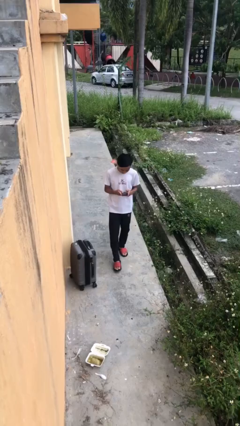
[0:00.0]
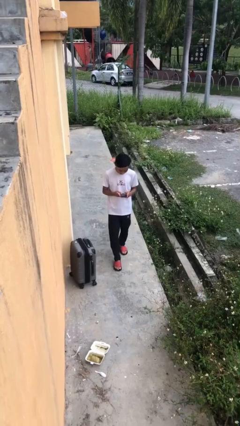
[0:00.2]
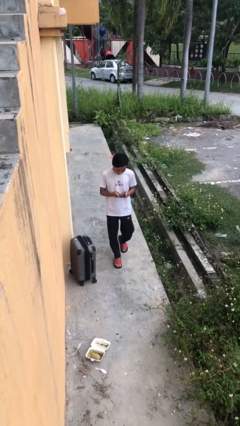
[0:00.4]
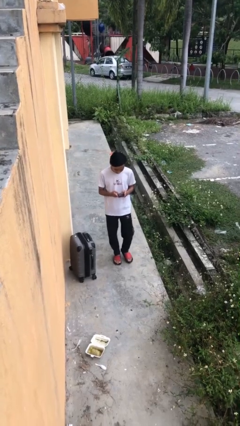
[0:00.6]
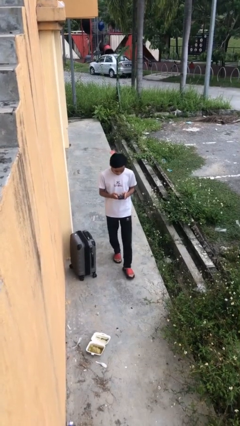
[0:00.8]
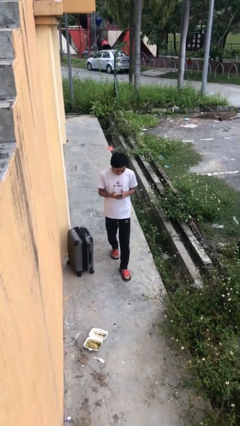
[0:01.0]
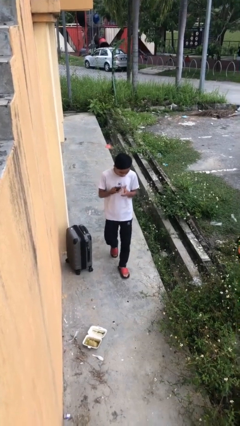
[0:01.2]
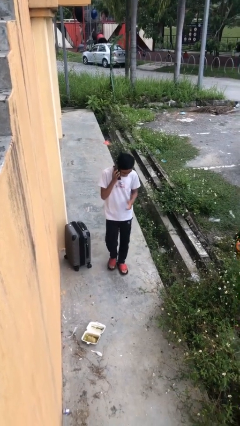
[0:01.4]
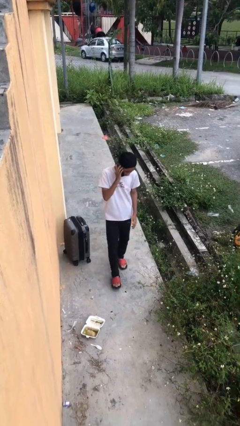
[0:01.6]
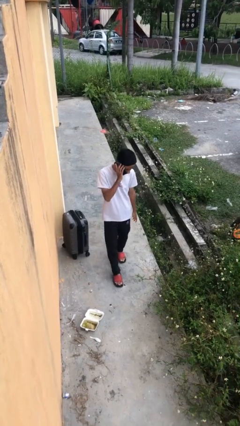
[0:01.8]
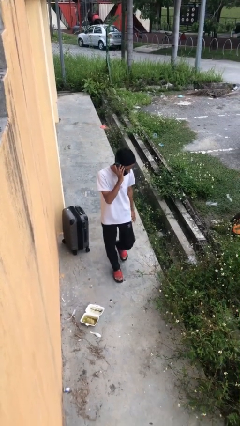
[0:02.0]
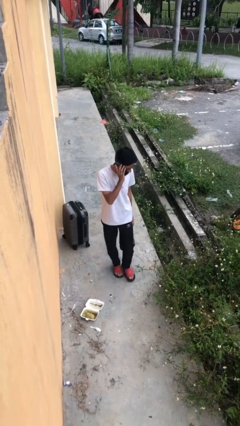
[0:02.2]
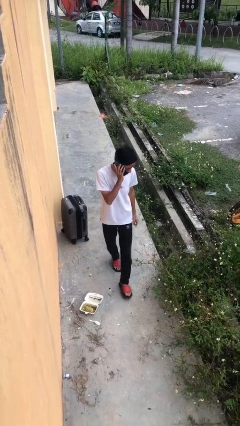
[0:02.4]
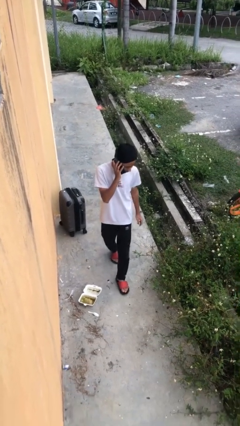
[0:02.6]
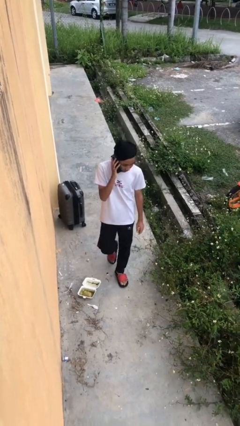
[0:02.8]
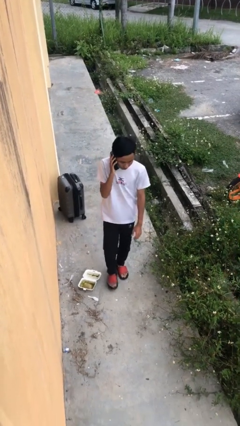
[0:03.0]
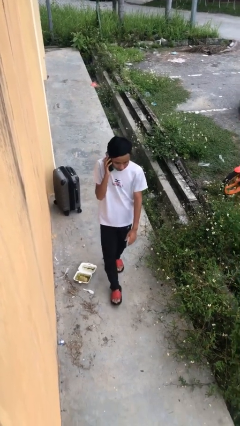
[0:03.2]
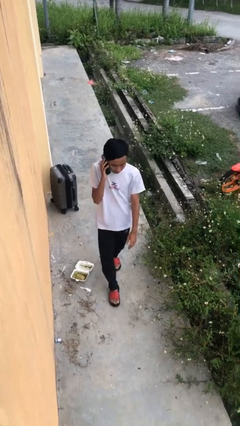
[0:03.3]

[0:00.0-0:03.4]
person talks on phone

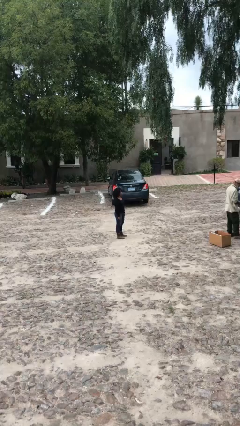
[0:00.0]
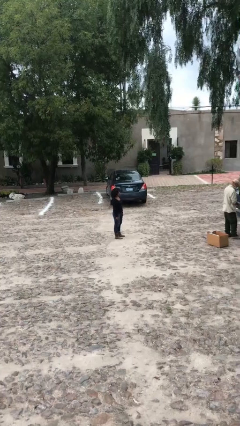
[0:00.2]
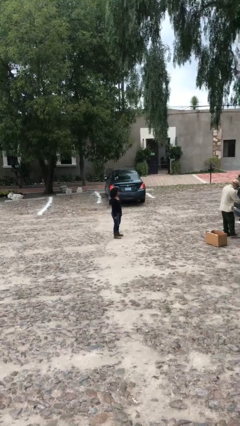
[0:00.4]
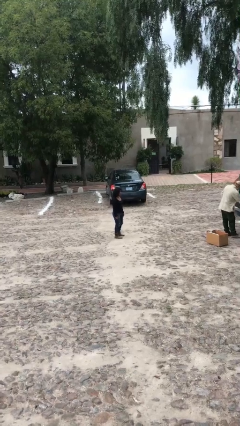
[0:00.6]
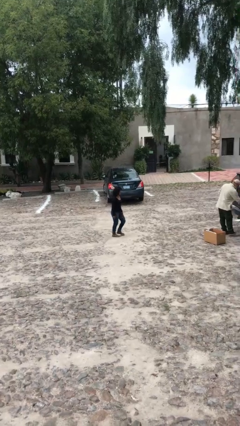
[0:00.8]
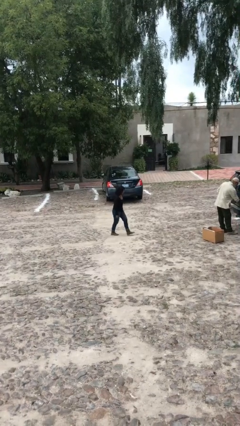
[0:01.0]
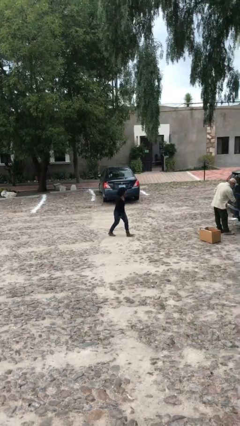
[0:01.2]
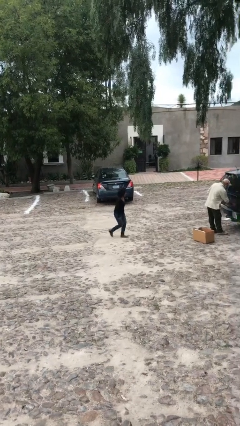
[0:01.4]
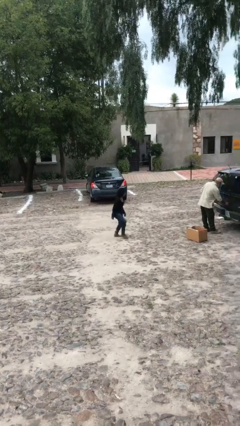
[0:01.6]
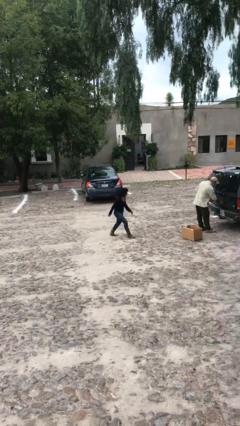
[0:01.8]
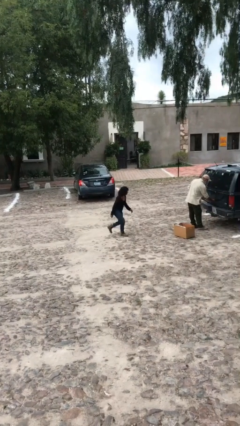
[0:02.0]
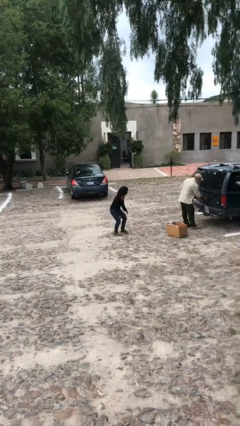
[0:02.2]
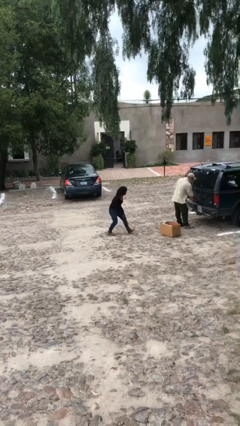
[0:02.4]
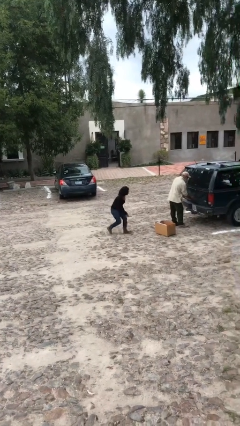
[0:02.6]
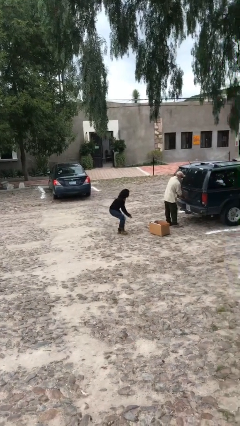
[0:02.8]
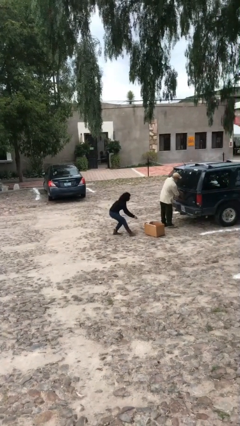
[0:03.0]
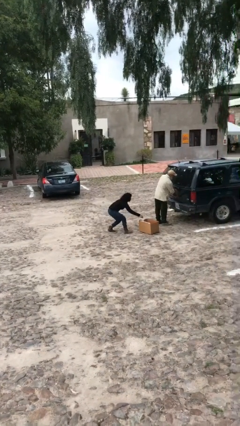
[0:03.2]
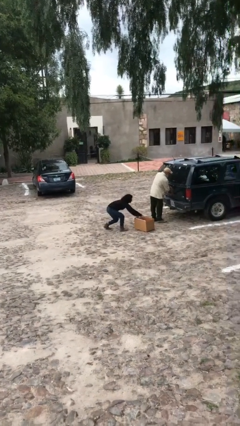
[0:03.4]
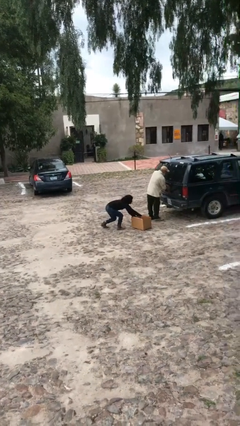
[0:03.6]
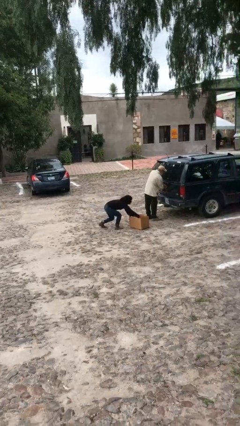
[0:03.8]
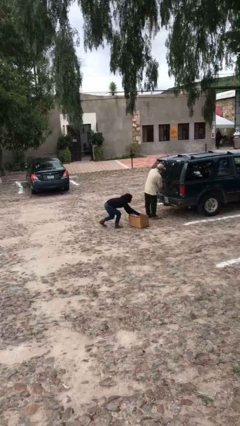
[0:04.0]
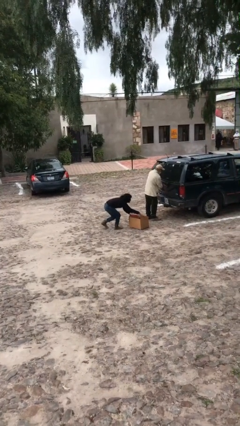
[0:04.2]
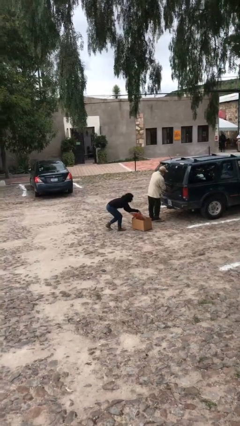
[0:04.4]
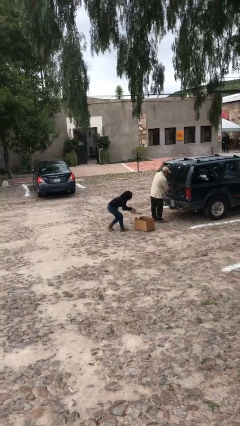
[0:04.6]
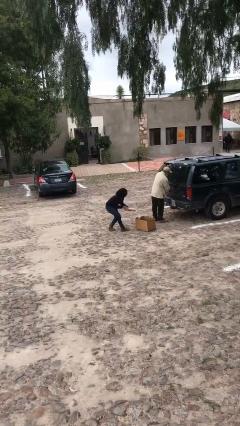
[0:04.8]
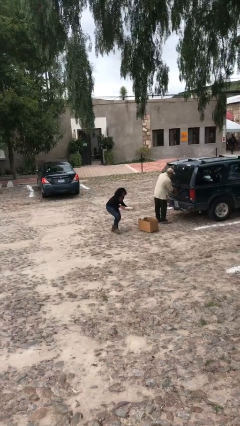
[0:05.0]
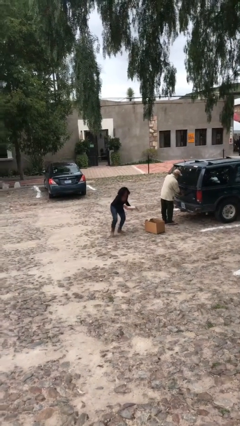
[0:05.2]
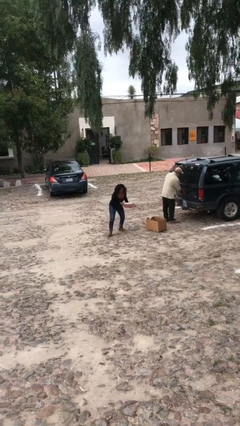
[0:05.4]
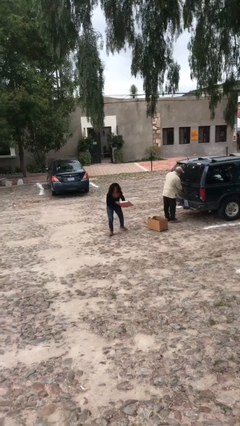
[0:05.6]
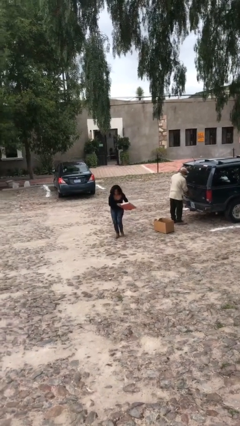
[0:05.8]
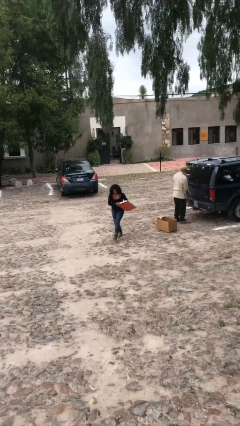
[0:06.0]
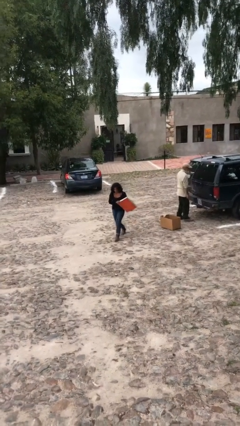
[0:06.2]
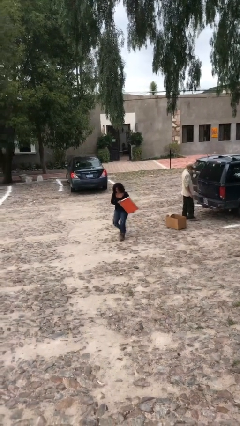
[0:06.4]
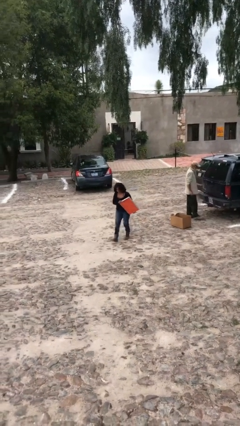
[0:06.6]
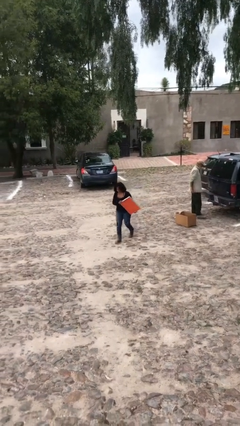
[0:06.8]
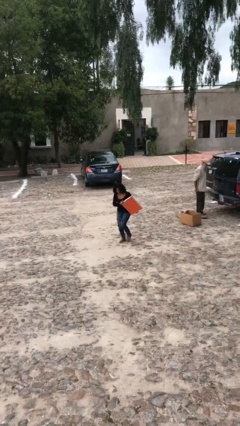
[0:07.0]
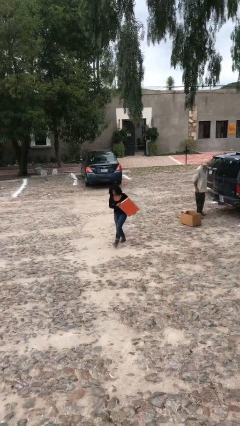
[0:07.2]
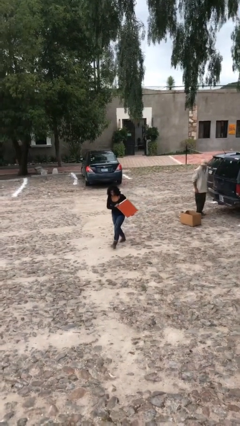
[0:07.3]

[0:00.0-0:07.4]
person steals object from person

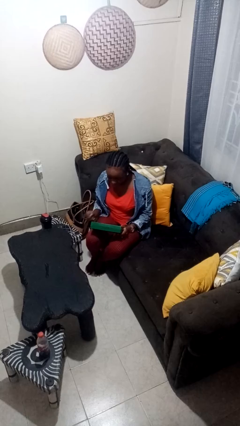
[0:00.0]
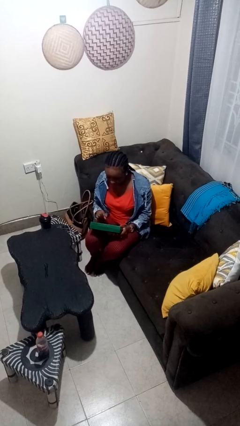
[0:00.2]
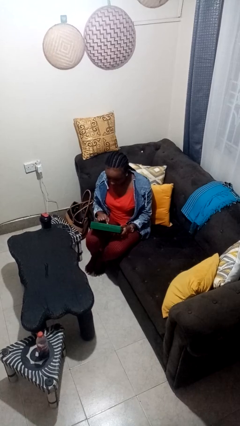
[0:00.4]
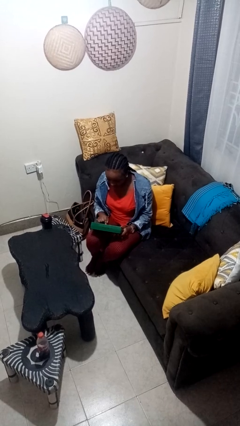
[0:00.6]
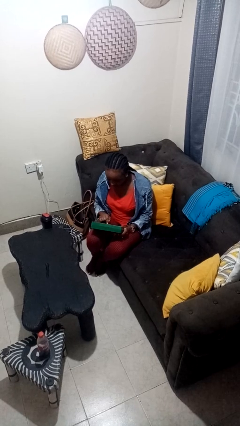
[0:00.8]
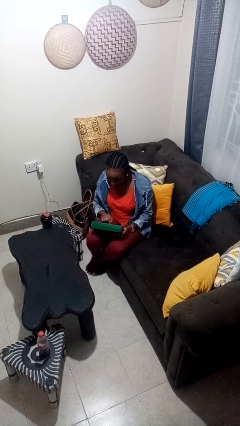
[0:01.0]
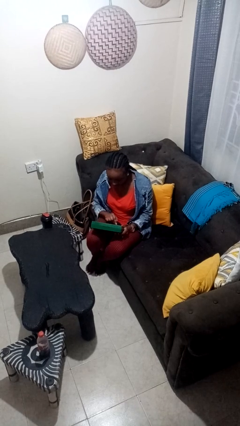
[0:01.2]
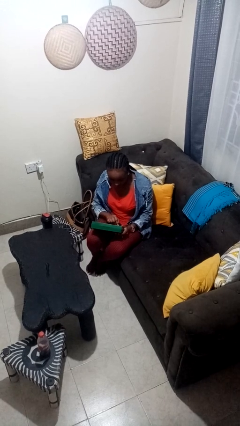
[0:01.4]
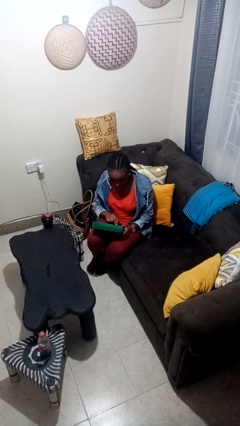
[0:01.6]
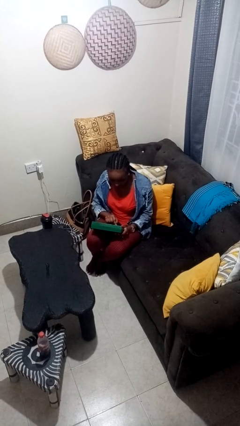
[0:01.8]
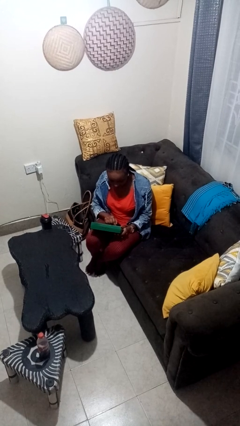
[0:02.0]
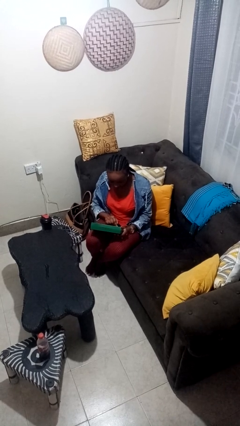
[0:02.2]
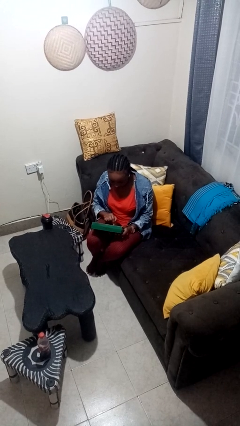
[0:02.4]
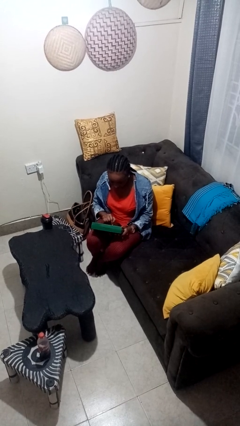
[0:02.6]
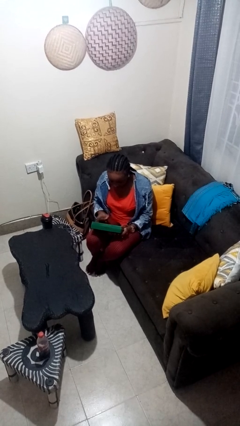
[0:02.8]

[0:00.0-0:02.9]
person interacts with handheld game

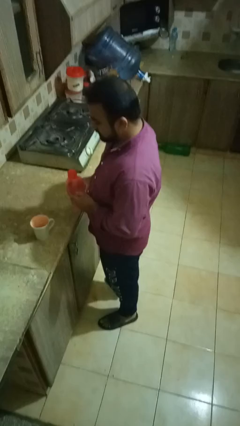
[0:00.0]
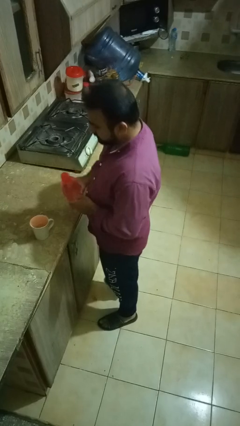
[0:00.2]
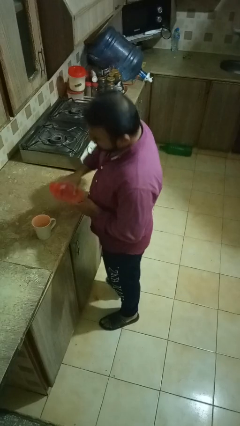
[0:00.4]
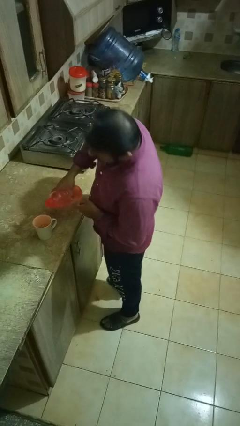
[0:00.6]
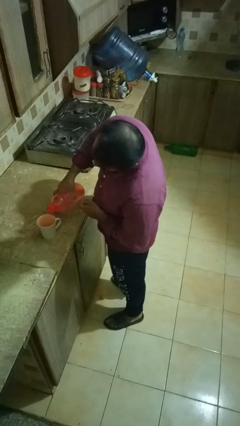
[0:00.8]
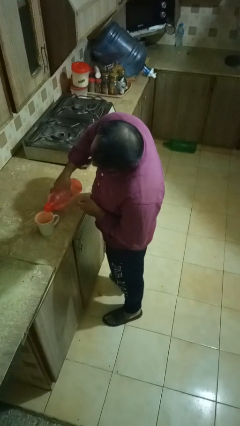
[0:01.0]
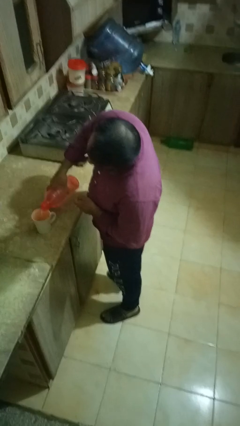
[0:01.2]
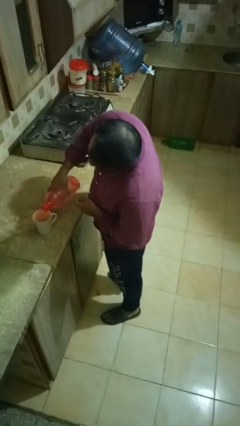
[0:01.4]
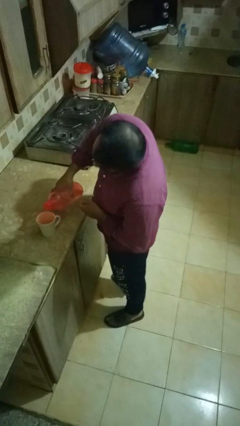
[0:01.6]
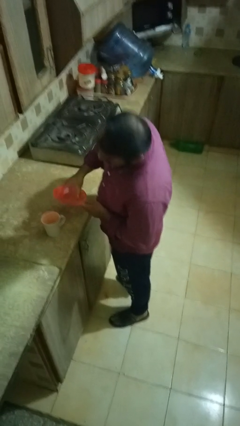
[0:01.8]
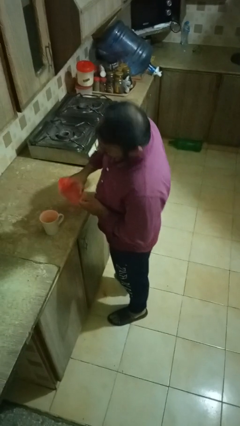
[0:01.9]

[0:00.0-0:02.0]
person pours liquid into cup

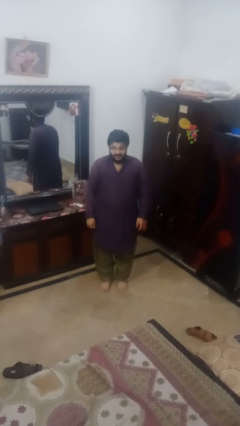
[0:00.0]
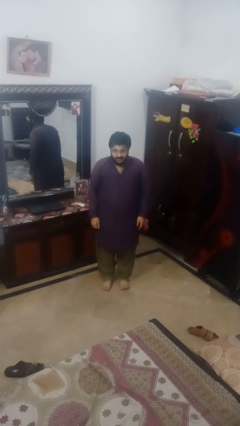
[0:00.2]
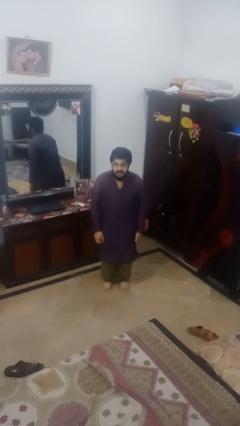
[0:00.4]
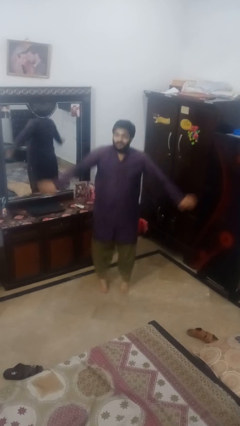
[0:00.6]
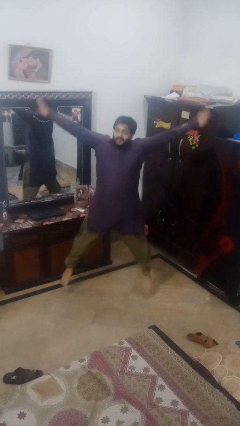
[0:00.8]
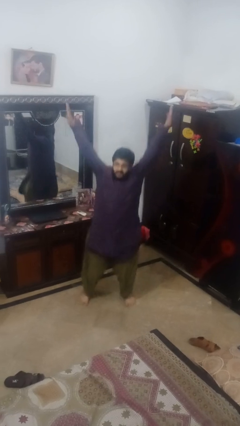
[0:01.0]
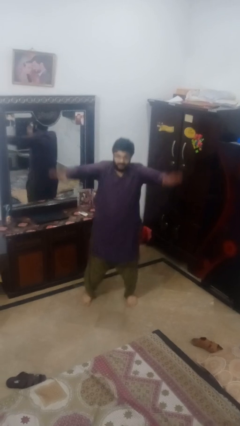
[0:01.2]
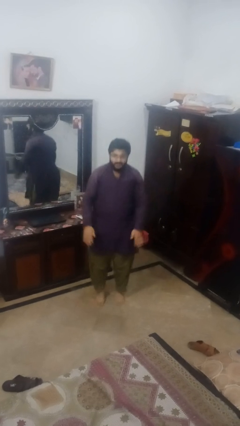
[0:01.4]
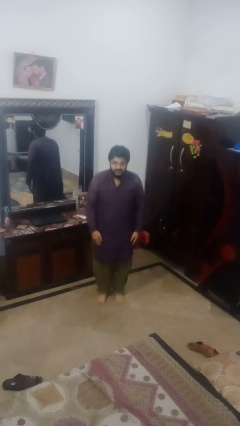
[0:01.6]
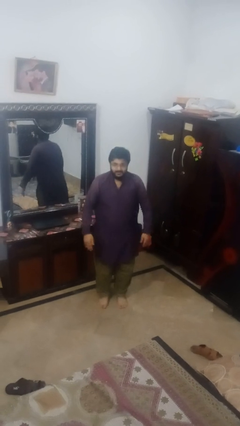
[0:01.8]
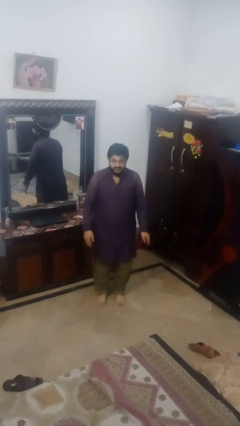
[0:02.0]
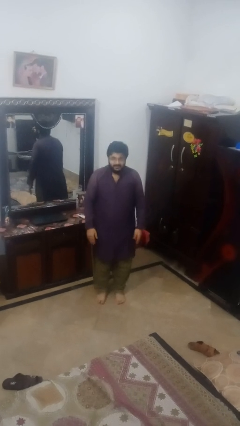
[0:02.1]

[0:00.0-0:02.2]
person exercises with jumping jacks
